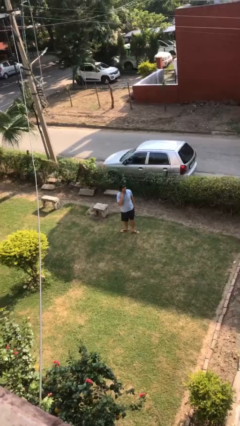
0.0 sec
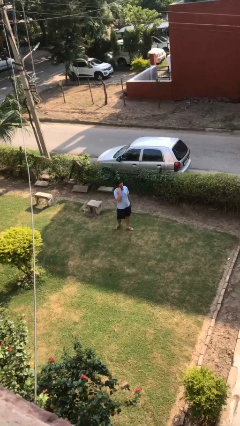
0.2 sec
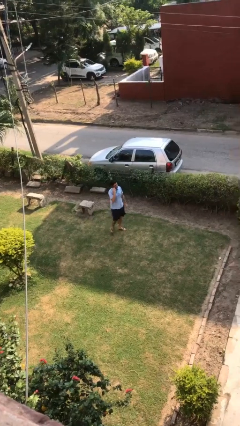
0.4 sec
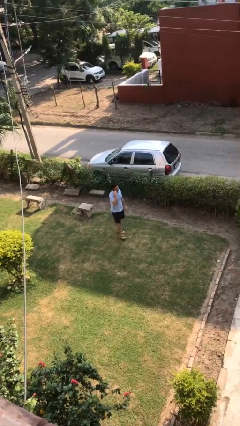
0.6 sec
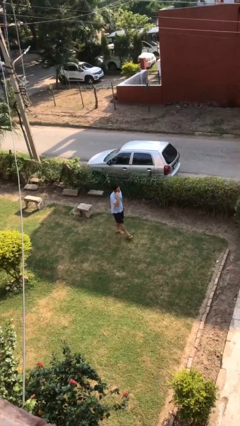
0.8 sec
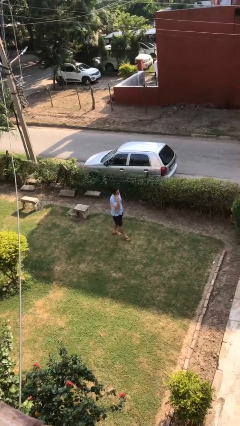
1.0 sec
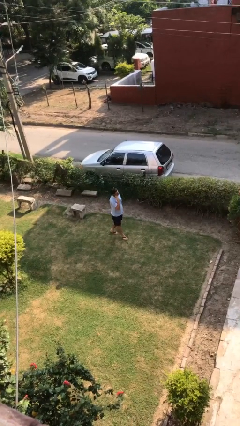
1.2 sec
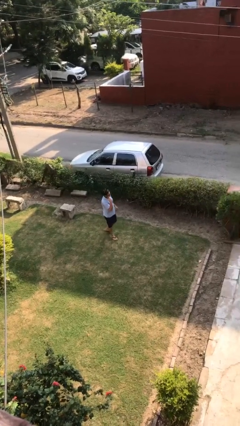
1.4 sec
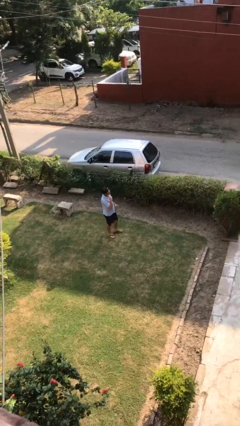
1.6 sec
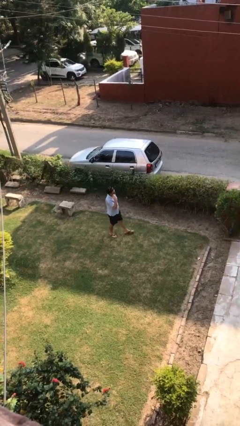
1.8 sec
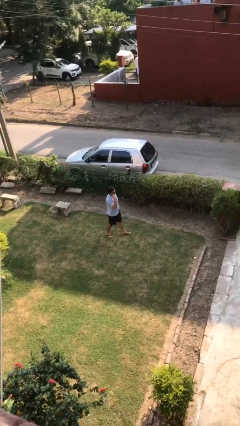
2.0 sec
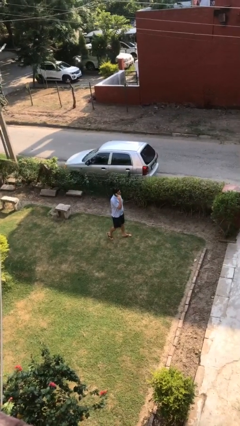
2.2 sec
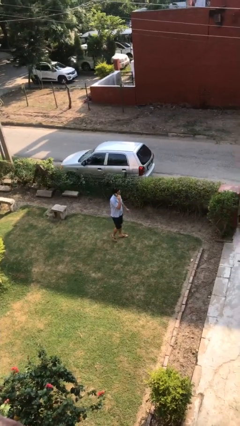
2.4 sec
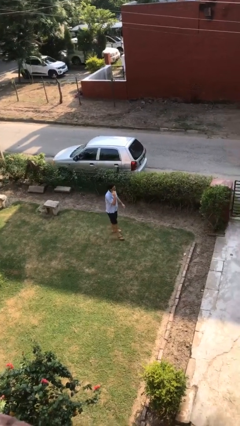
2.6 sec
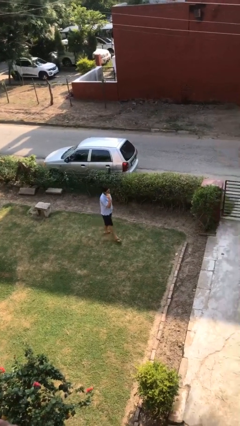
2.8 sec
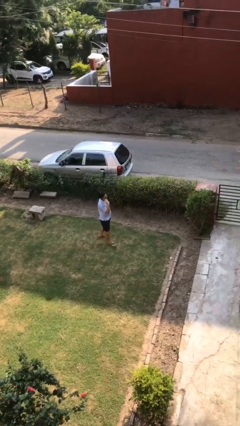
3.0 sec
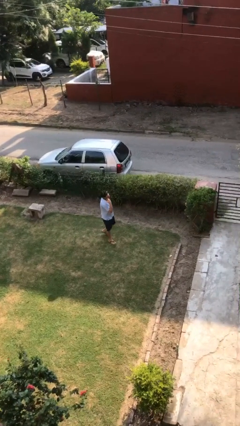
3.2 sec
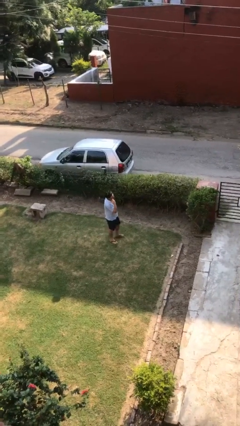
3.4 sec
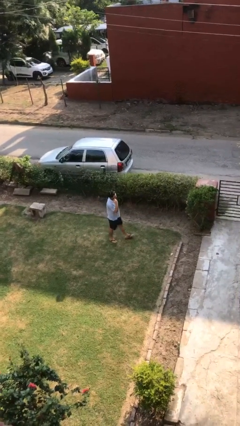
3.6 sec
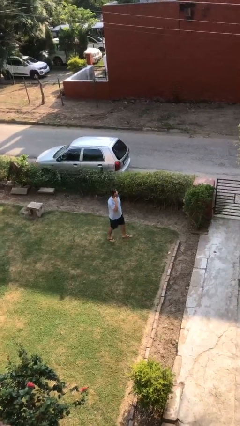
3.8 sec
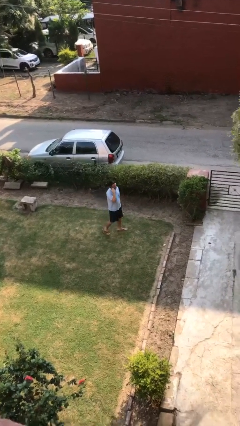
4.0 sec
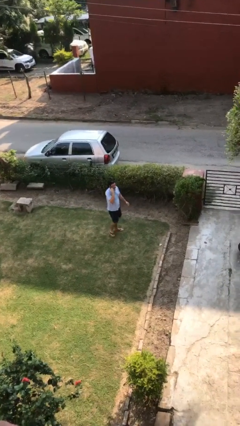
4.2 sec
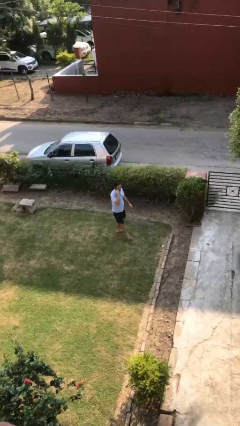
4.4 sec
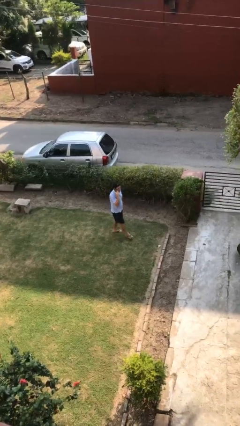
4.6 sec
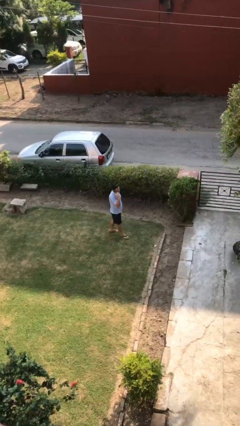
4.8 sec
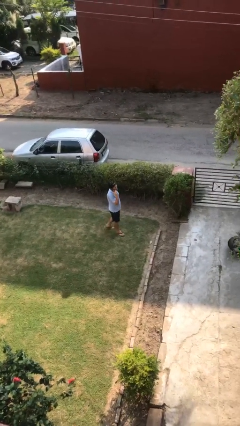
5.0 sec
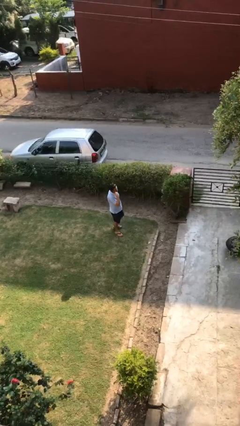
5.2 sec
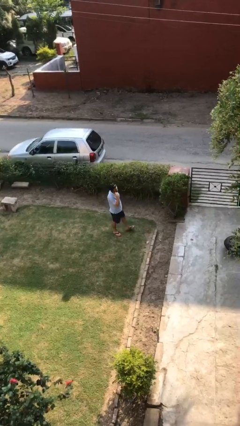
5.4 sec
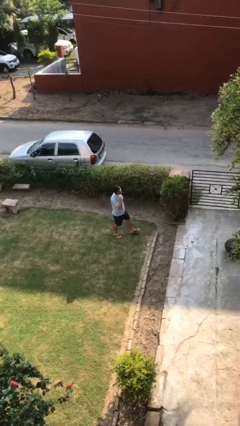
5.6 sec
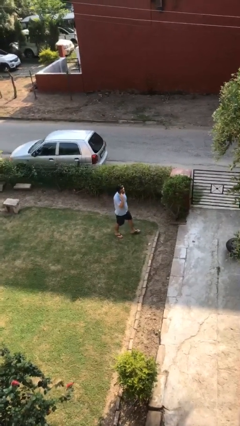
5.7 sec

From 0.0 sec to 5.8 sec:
person talks on phone

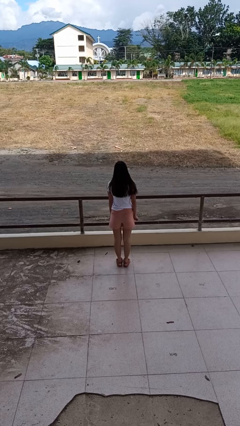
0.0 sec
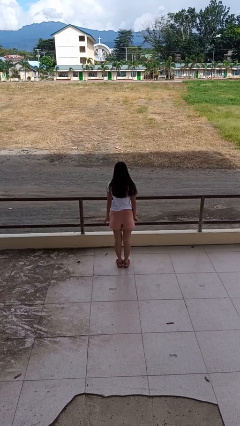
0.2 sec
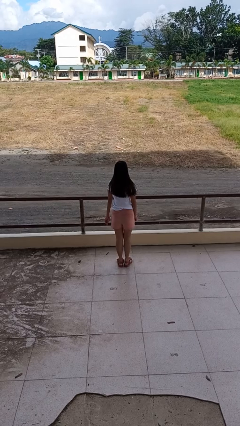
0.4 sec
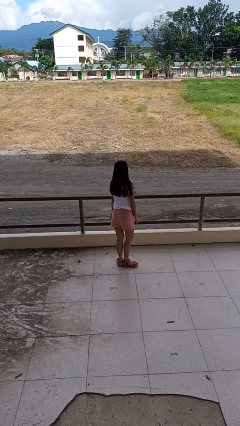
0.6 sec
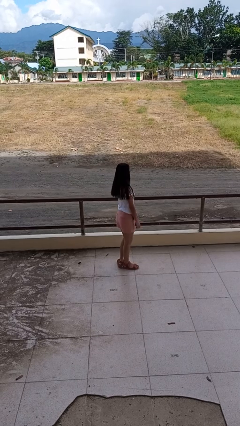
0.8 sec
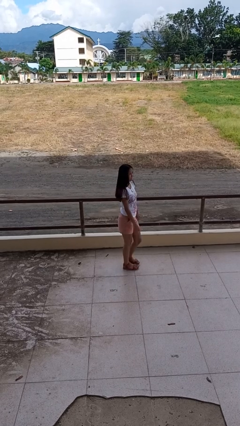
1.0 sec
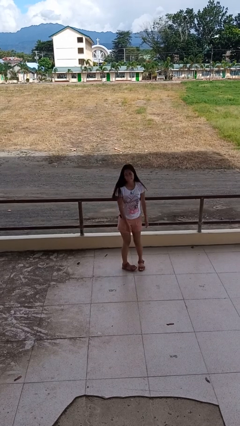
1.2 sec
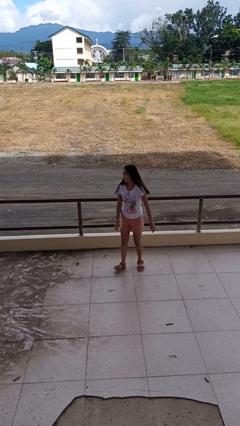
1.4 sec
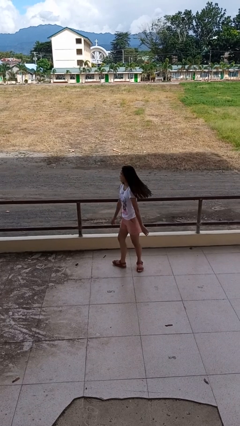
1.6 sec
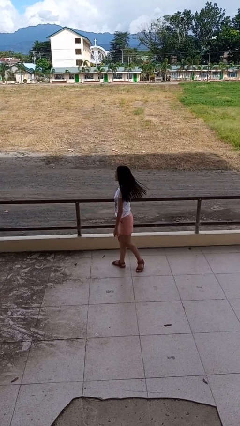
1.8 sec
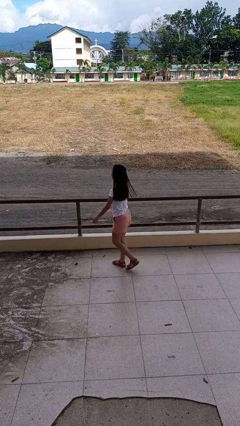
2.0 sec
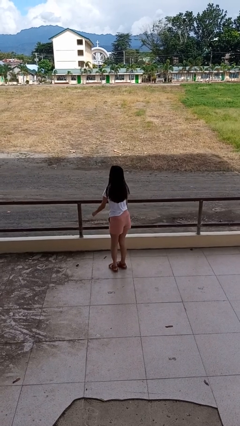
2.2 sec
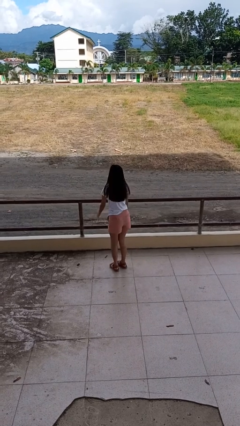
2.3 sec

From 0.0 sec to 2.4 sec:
person twirls

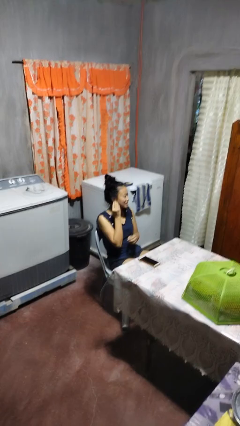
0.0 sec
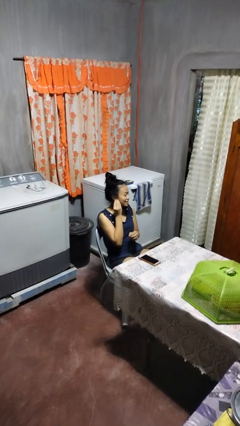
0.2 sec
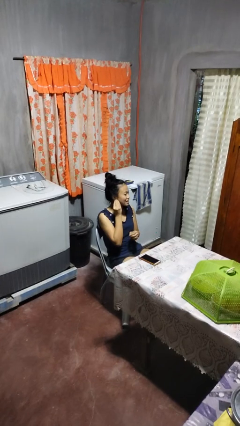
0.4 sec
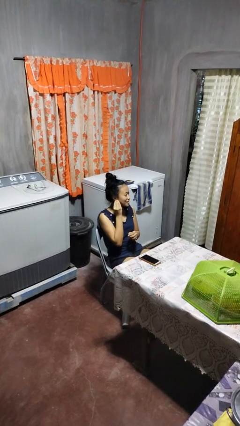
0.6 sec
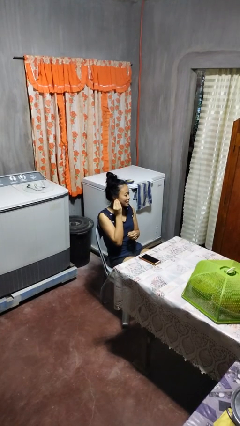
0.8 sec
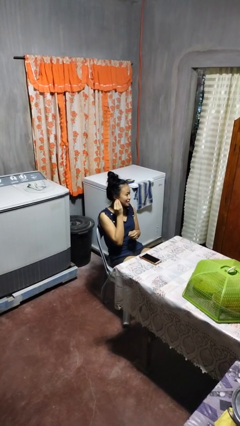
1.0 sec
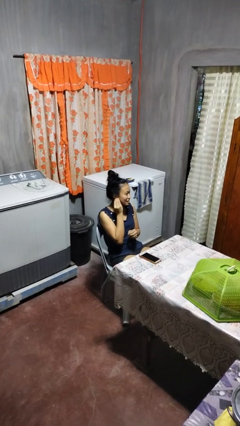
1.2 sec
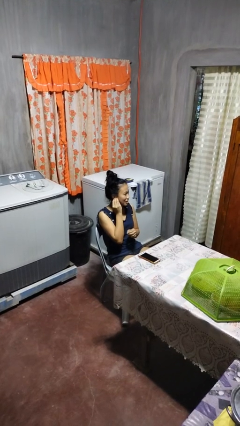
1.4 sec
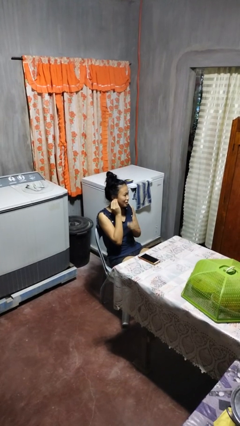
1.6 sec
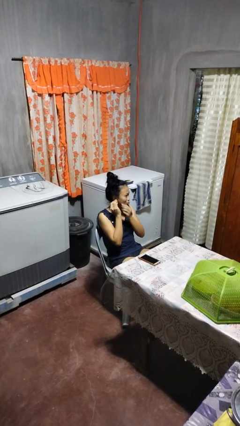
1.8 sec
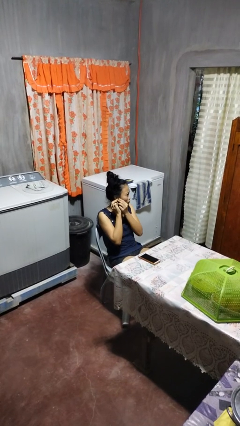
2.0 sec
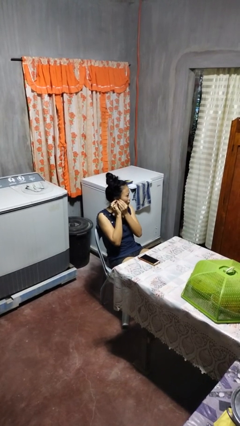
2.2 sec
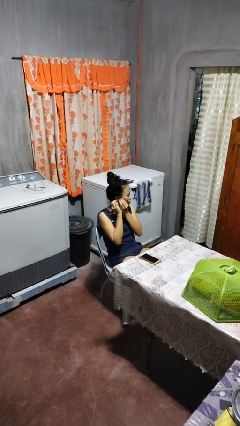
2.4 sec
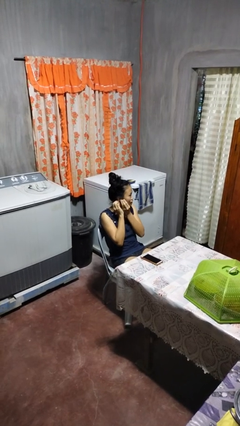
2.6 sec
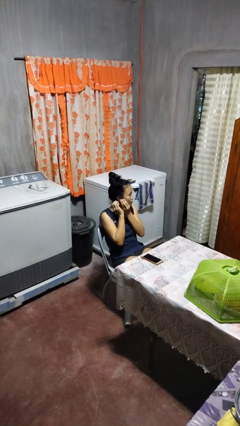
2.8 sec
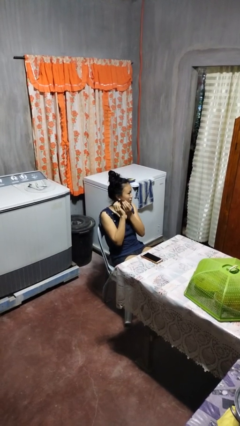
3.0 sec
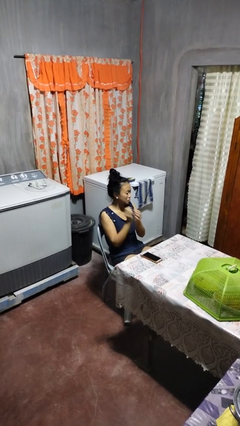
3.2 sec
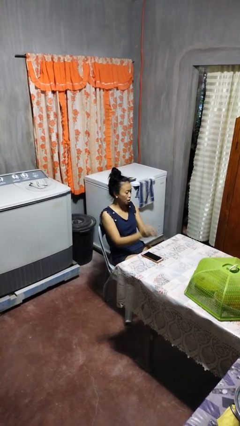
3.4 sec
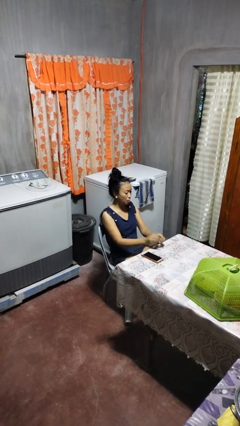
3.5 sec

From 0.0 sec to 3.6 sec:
person puts on earrings

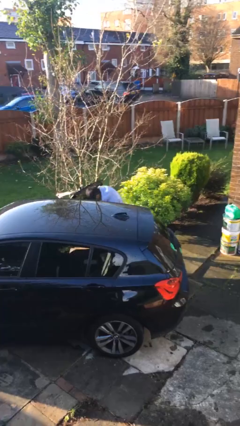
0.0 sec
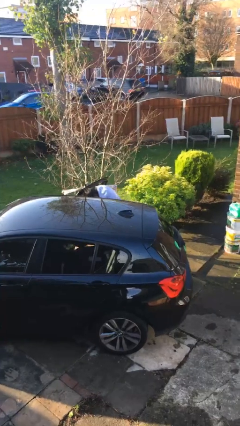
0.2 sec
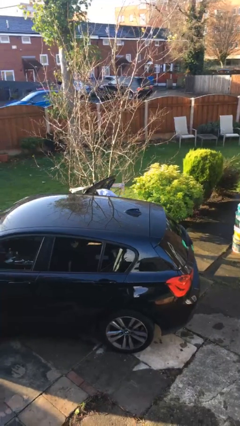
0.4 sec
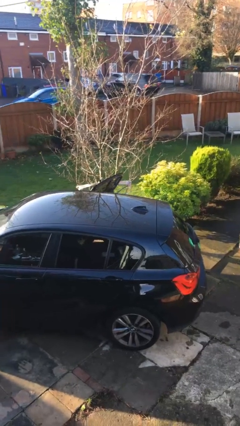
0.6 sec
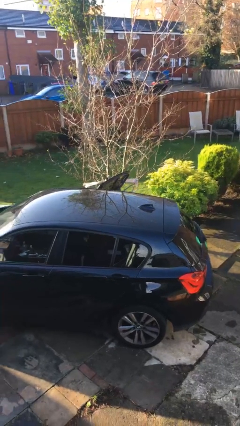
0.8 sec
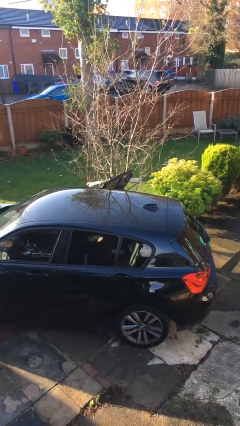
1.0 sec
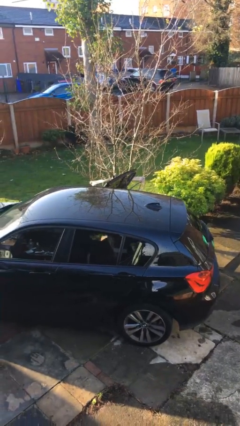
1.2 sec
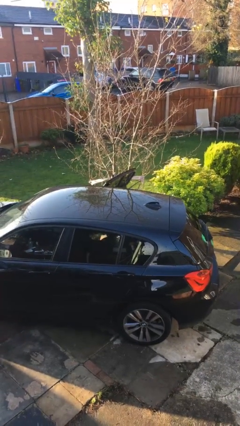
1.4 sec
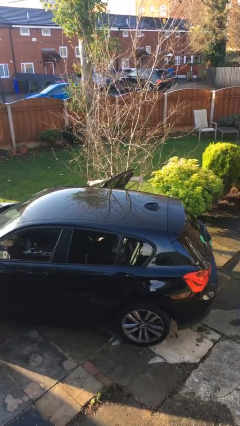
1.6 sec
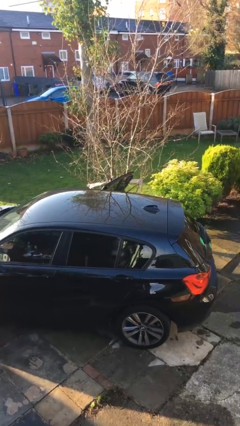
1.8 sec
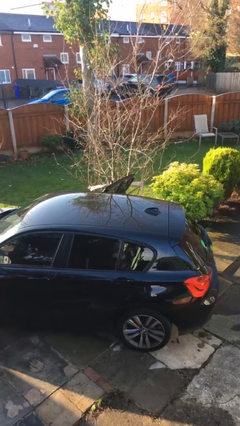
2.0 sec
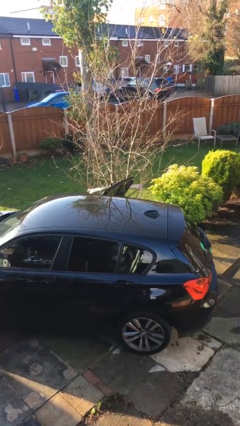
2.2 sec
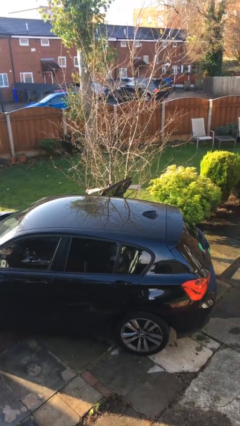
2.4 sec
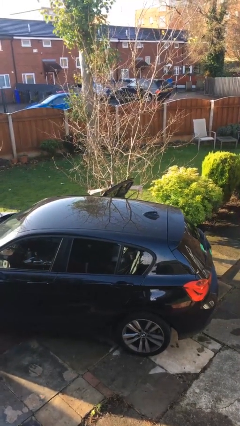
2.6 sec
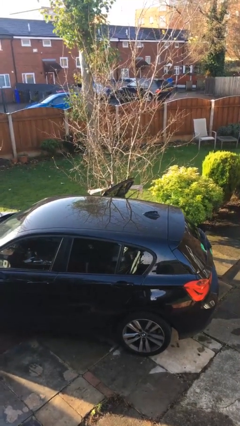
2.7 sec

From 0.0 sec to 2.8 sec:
person enters car

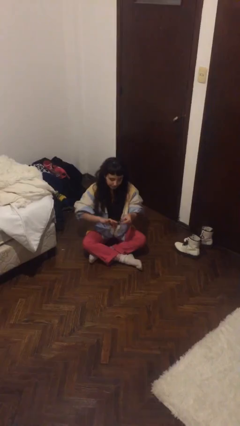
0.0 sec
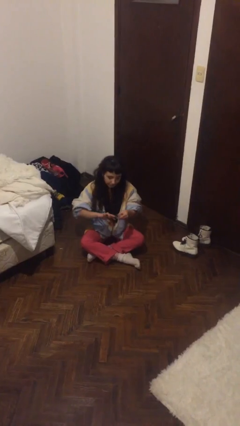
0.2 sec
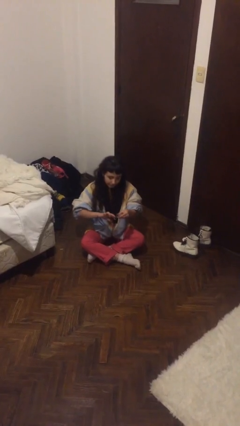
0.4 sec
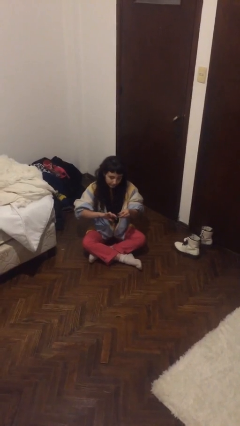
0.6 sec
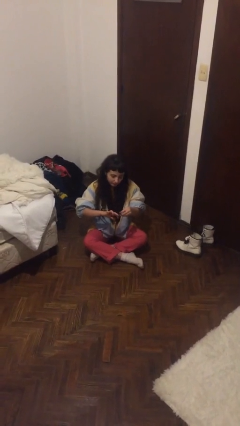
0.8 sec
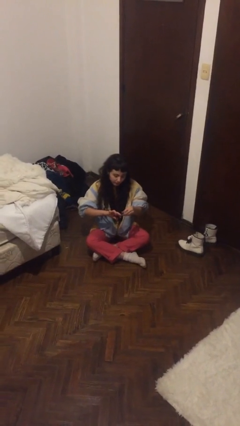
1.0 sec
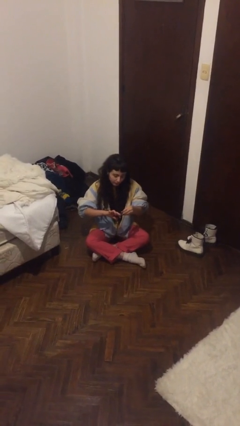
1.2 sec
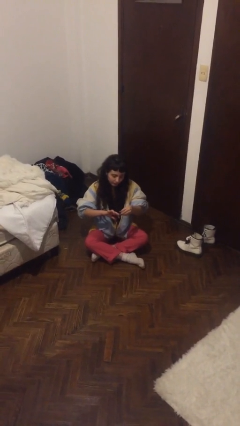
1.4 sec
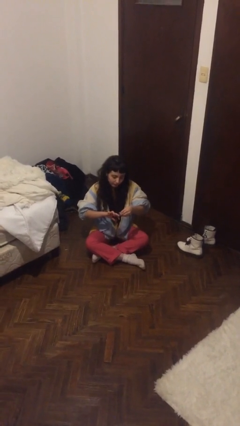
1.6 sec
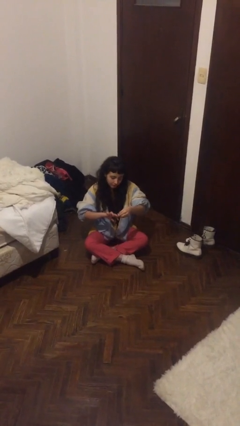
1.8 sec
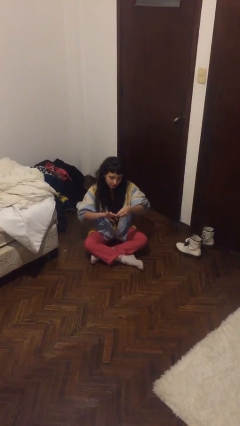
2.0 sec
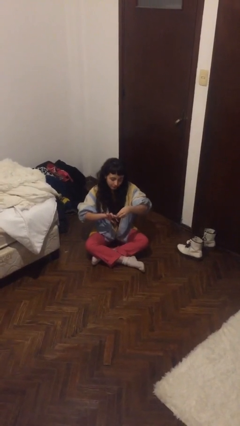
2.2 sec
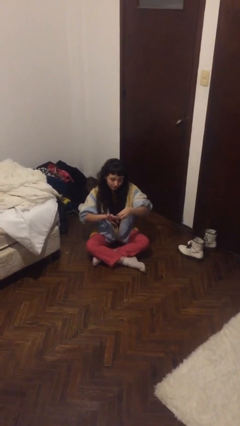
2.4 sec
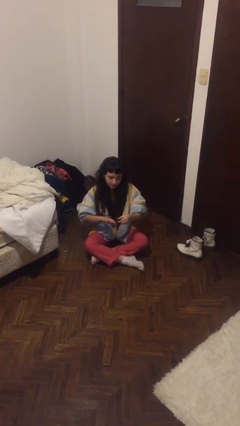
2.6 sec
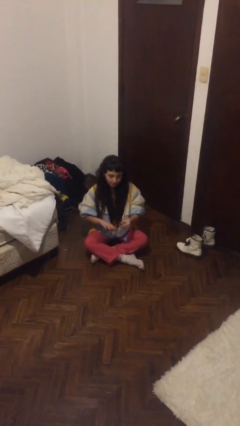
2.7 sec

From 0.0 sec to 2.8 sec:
person clips fingernails

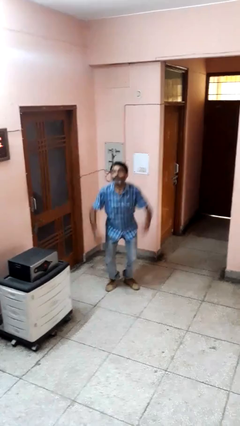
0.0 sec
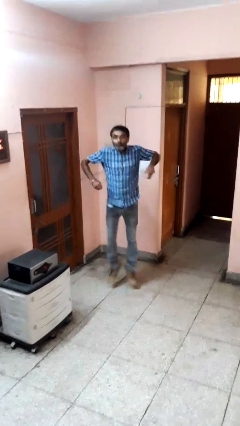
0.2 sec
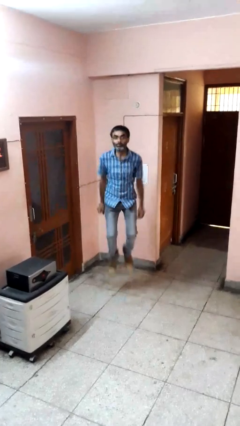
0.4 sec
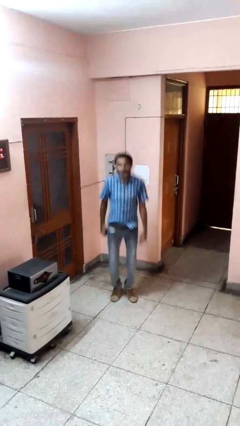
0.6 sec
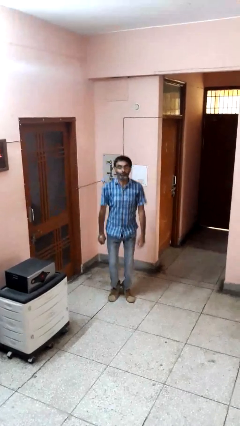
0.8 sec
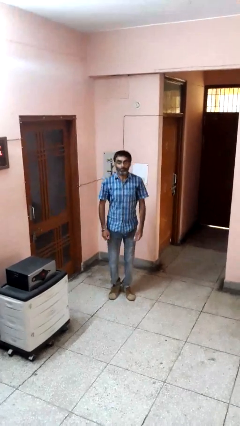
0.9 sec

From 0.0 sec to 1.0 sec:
person jumps
